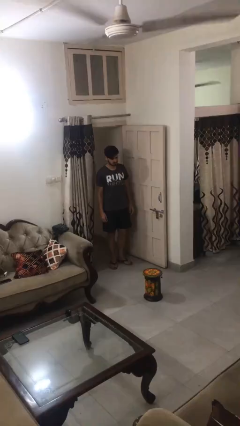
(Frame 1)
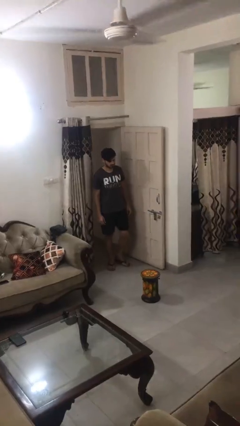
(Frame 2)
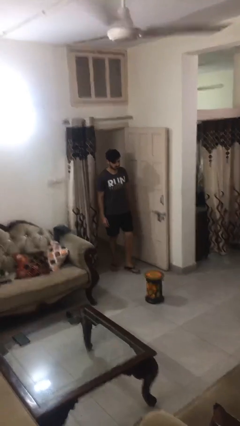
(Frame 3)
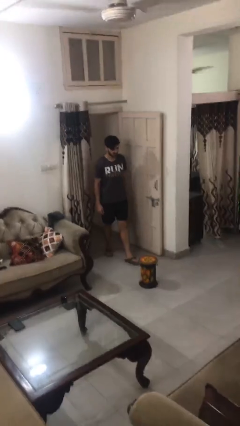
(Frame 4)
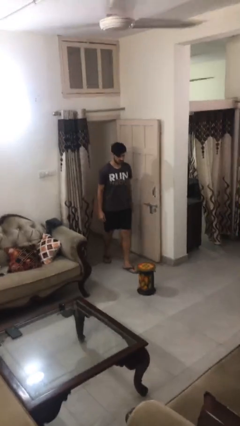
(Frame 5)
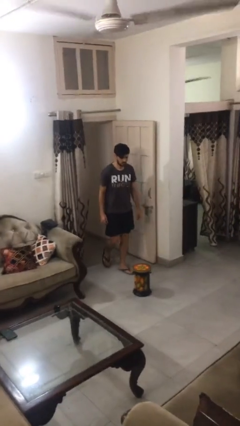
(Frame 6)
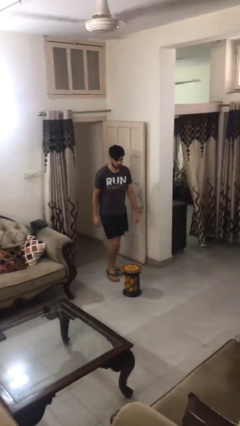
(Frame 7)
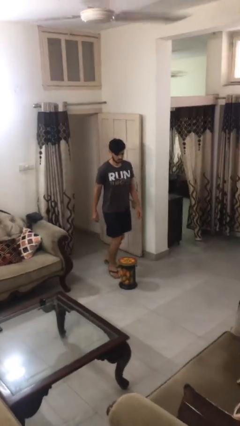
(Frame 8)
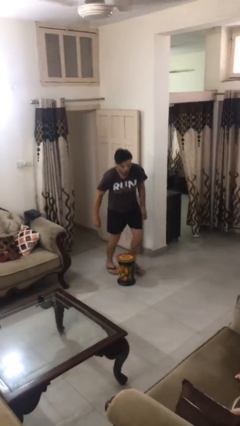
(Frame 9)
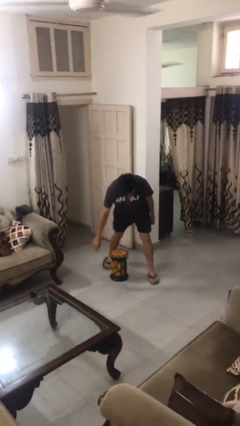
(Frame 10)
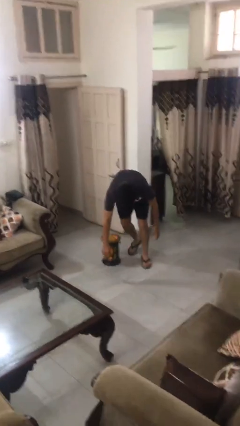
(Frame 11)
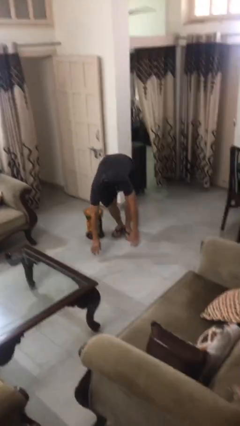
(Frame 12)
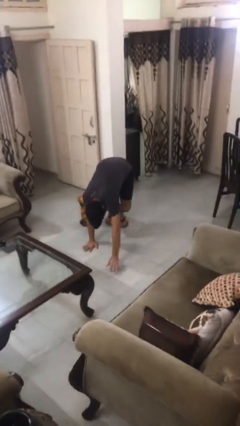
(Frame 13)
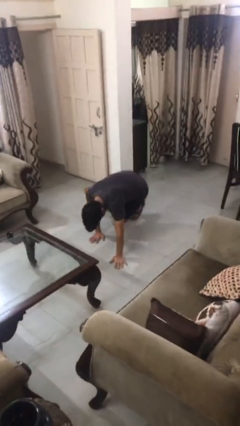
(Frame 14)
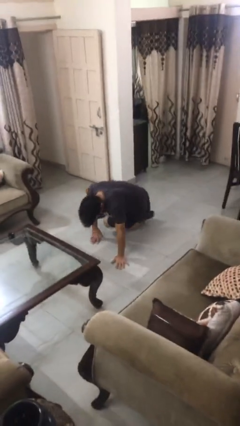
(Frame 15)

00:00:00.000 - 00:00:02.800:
person trips on object on floor

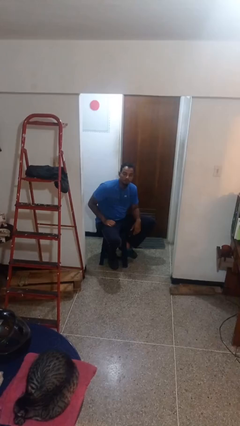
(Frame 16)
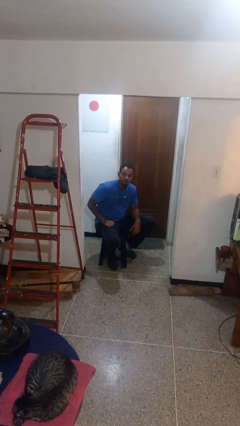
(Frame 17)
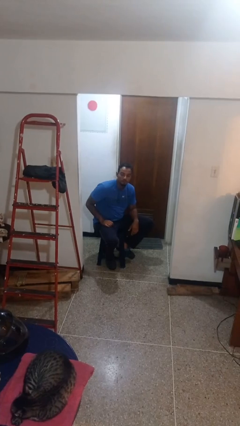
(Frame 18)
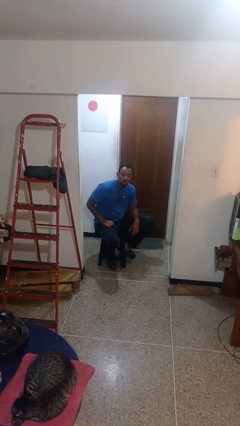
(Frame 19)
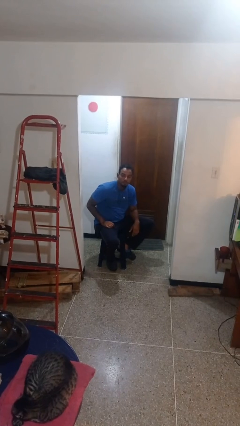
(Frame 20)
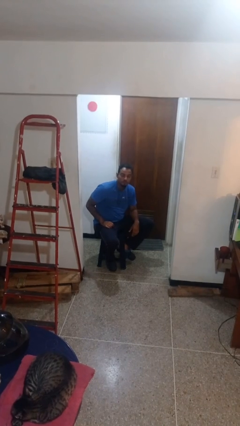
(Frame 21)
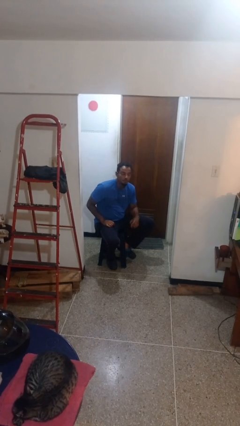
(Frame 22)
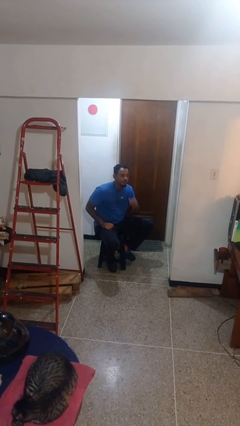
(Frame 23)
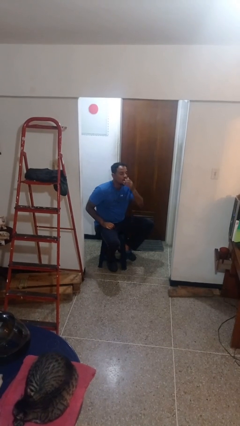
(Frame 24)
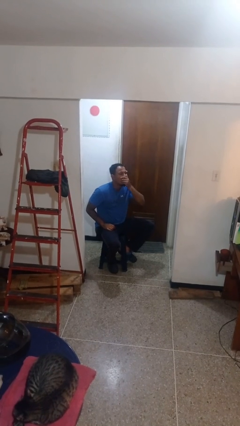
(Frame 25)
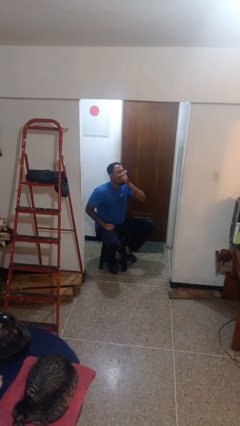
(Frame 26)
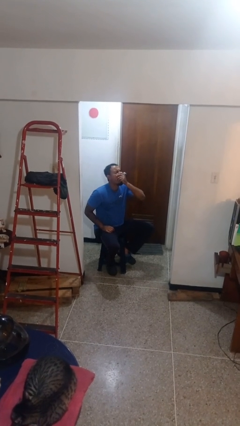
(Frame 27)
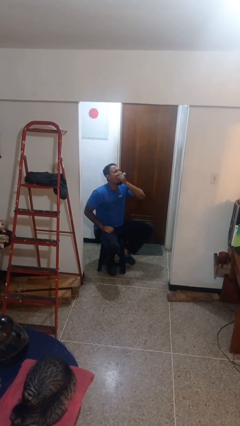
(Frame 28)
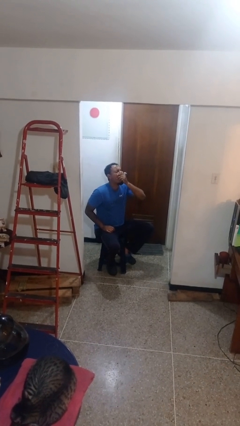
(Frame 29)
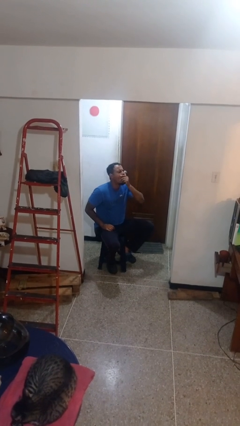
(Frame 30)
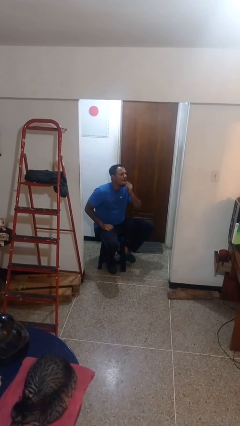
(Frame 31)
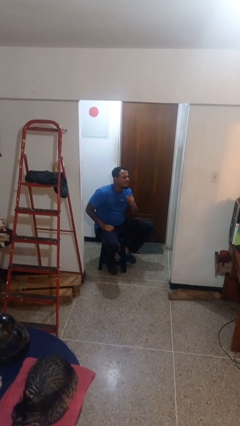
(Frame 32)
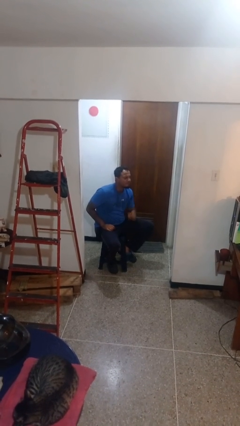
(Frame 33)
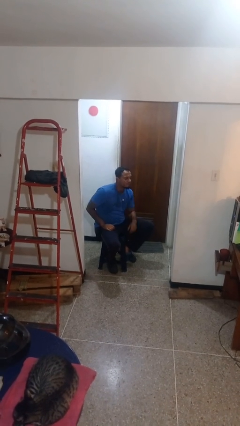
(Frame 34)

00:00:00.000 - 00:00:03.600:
person yawns

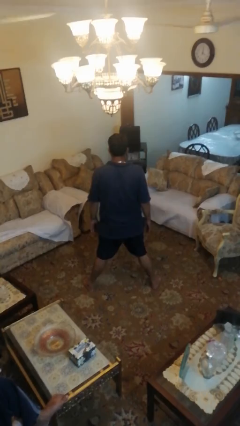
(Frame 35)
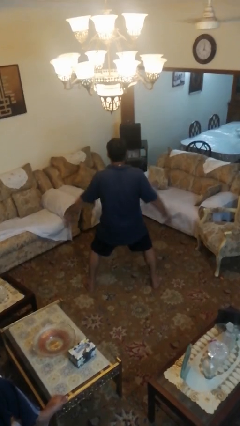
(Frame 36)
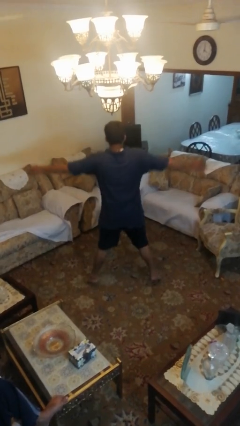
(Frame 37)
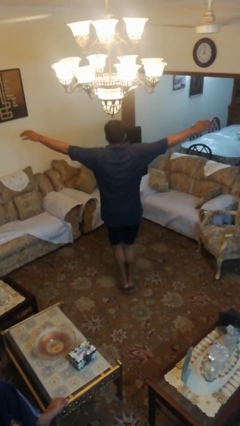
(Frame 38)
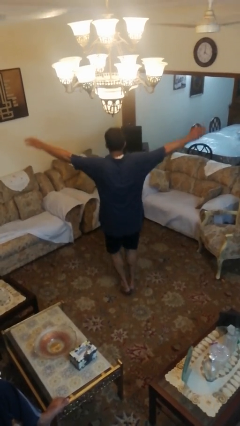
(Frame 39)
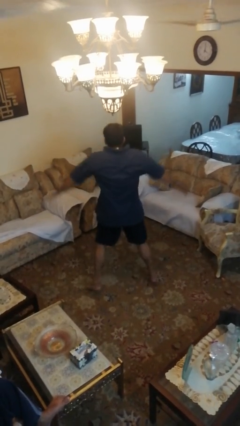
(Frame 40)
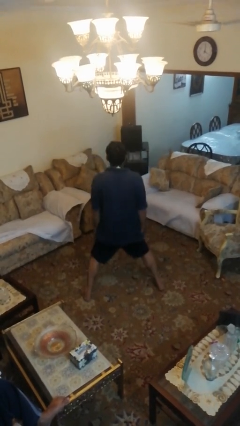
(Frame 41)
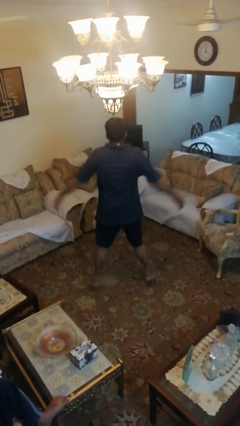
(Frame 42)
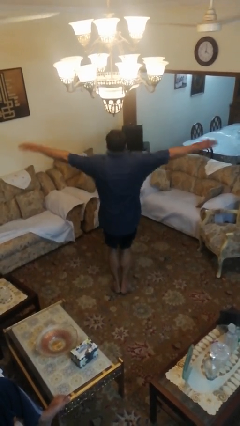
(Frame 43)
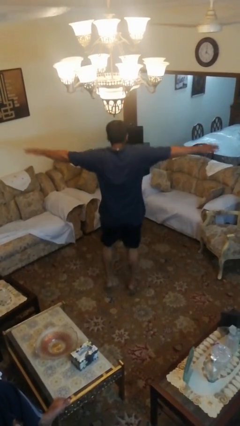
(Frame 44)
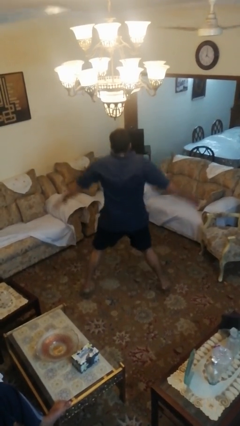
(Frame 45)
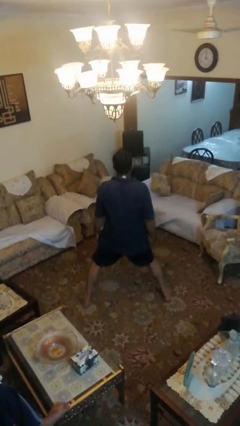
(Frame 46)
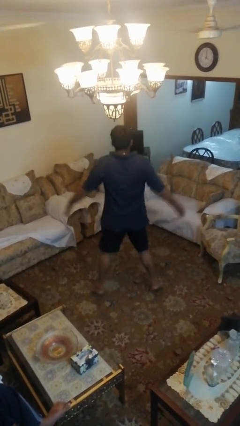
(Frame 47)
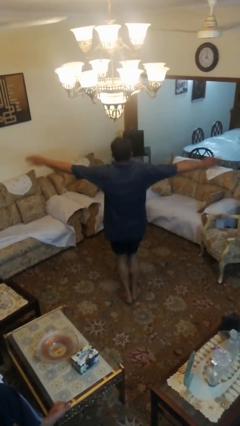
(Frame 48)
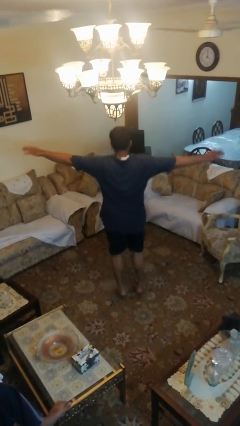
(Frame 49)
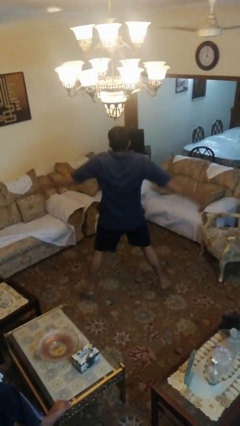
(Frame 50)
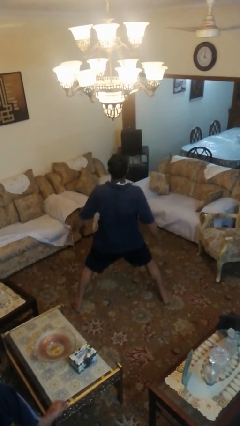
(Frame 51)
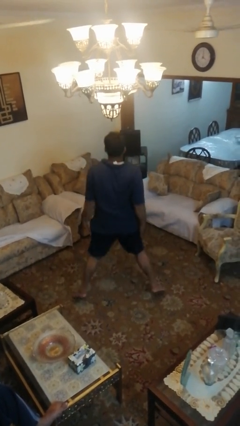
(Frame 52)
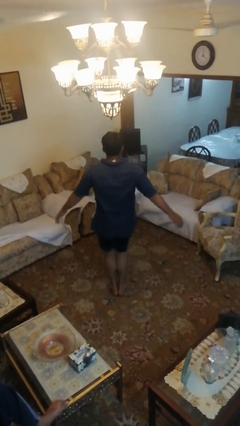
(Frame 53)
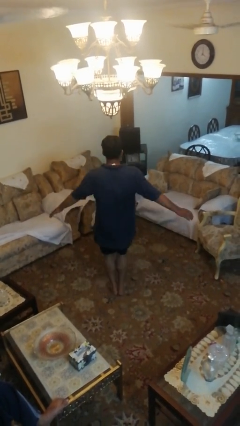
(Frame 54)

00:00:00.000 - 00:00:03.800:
person exercises with jumping jacks

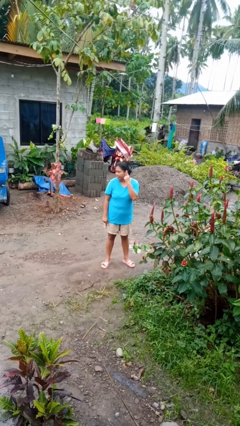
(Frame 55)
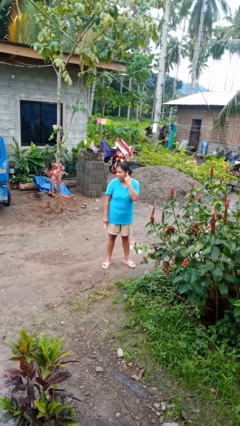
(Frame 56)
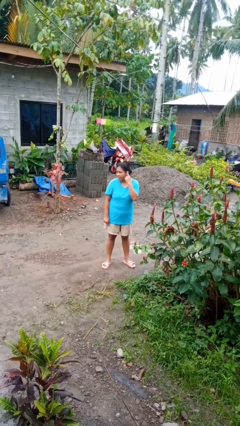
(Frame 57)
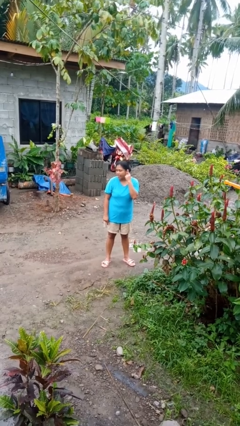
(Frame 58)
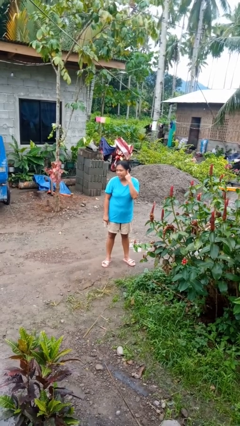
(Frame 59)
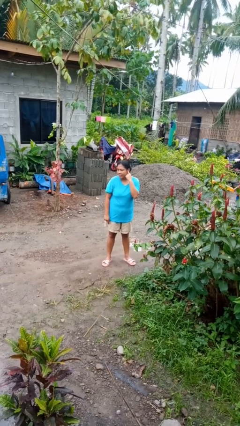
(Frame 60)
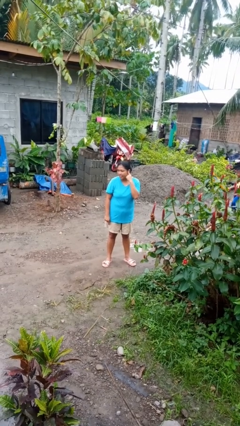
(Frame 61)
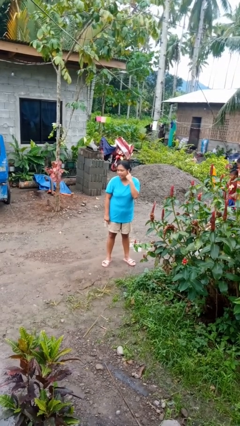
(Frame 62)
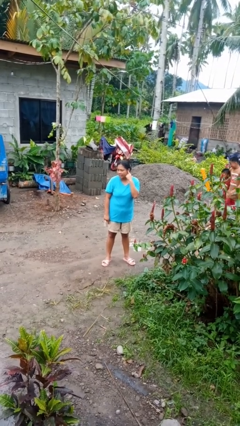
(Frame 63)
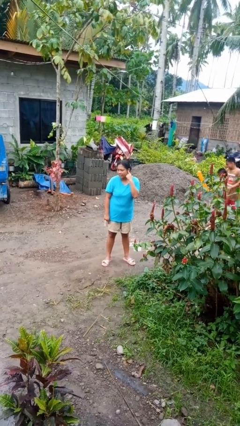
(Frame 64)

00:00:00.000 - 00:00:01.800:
person gestures listen closely

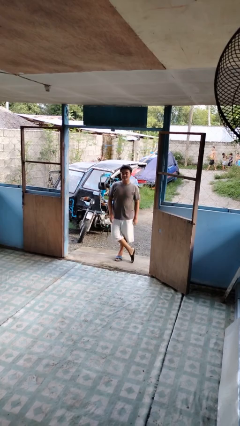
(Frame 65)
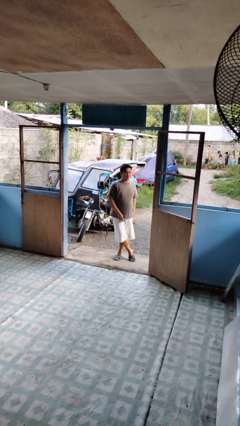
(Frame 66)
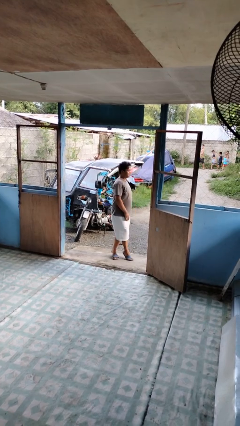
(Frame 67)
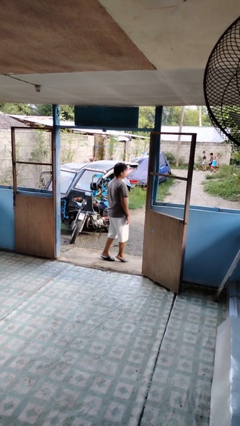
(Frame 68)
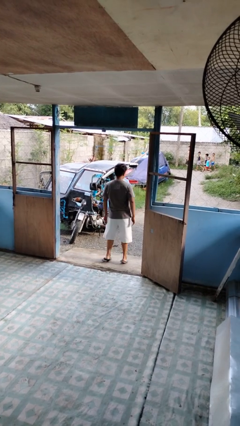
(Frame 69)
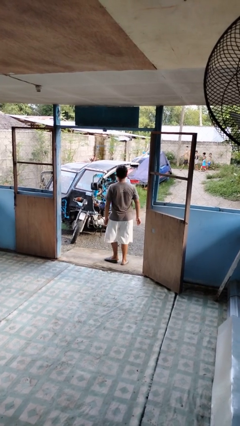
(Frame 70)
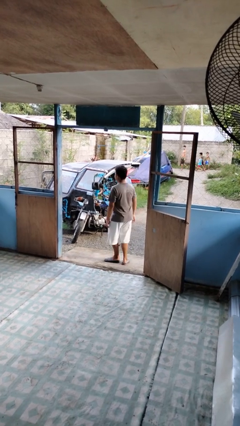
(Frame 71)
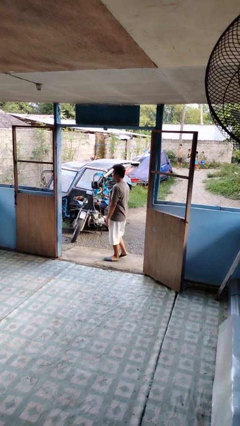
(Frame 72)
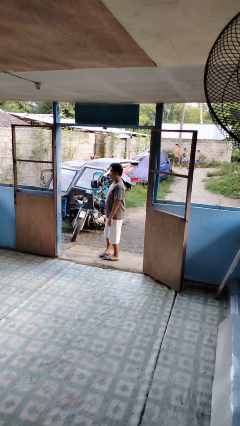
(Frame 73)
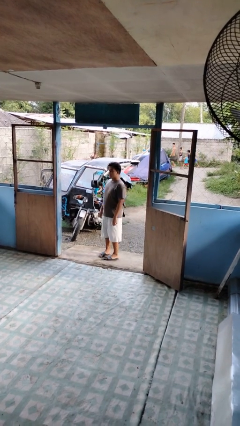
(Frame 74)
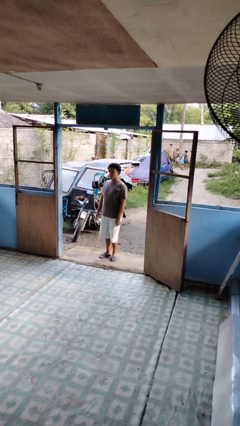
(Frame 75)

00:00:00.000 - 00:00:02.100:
person twirls

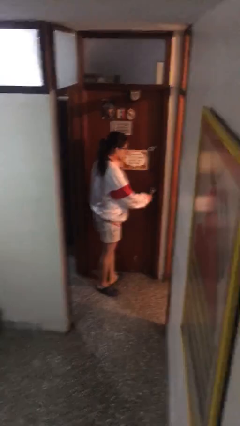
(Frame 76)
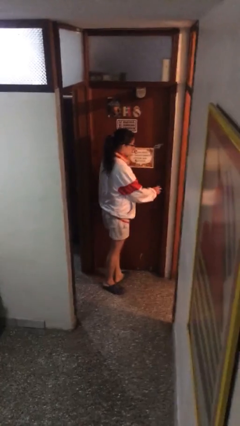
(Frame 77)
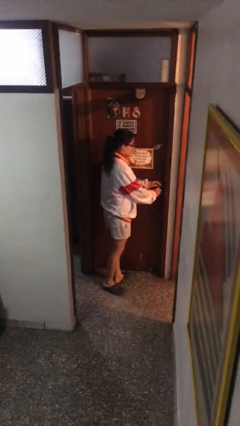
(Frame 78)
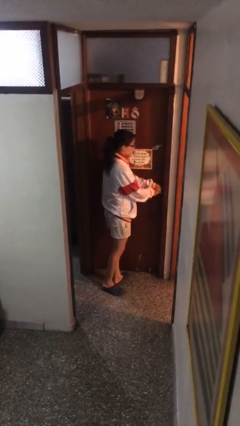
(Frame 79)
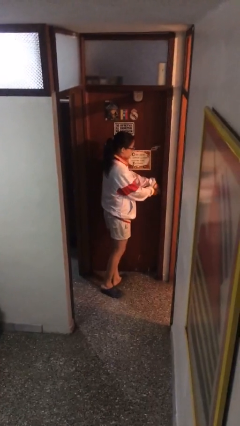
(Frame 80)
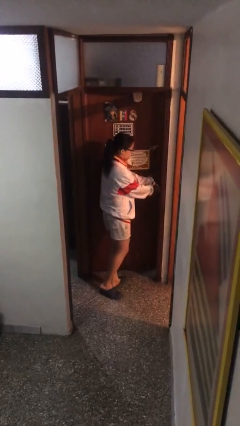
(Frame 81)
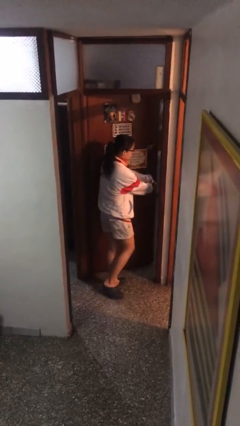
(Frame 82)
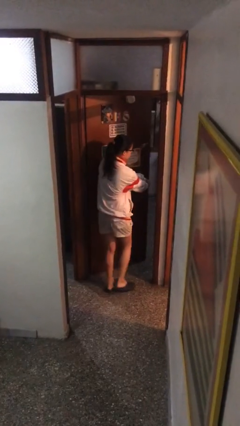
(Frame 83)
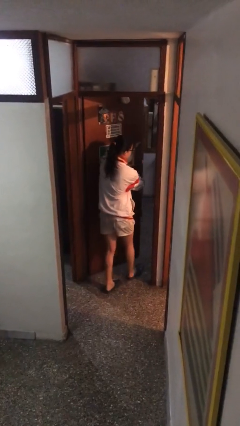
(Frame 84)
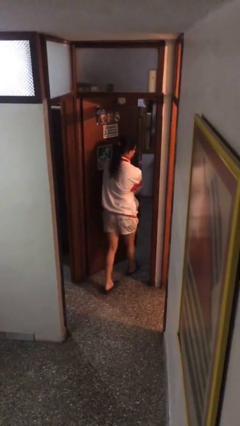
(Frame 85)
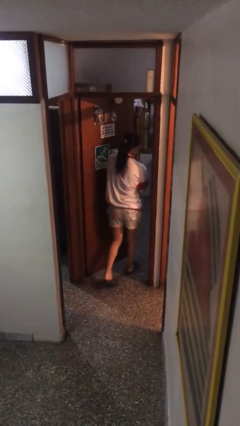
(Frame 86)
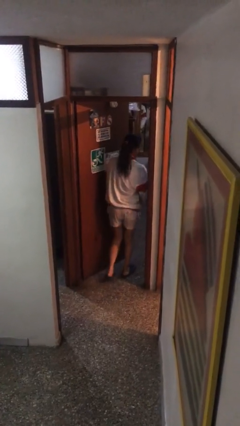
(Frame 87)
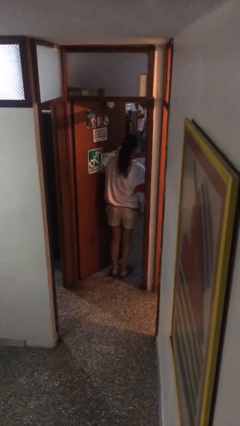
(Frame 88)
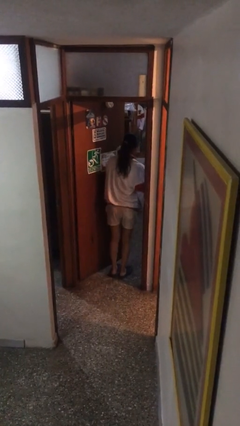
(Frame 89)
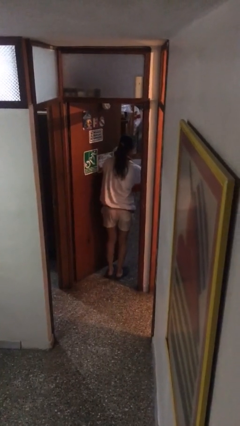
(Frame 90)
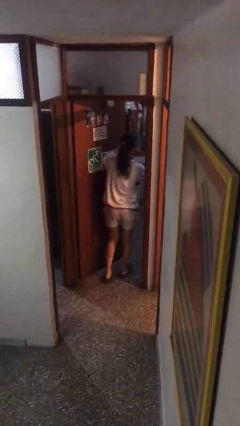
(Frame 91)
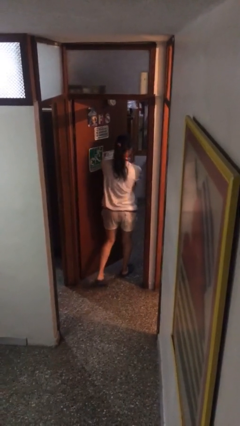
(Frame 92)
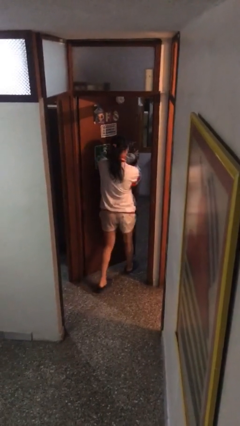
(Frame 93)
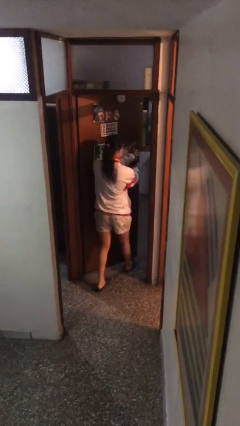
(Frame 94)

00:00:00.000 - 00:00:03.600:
person opens facility door
